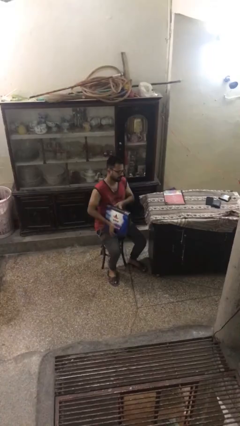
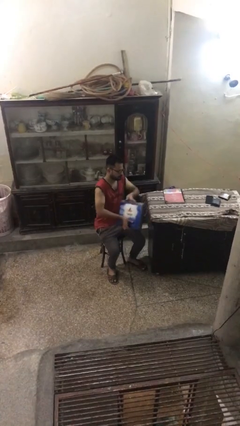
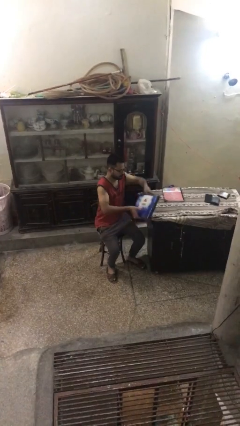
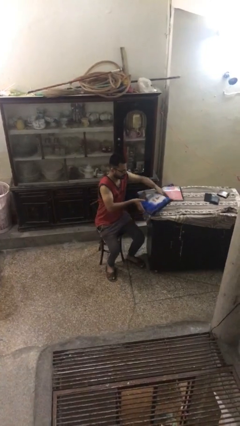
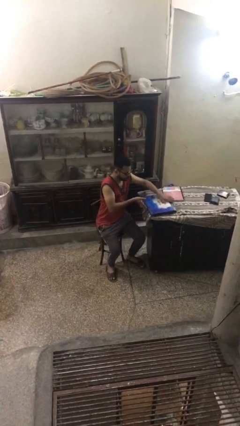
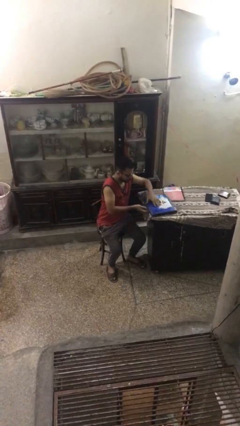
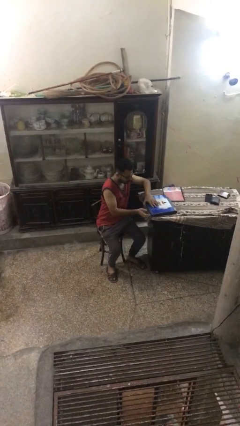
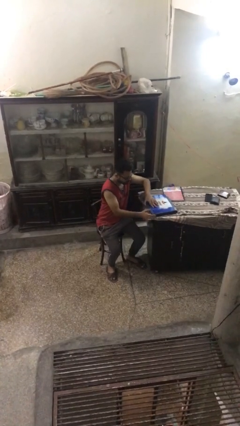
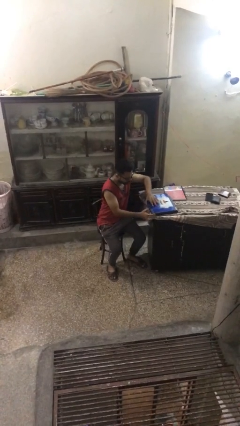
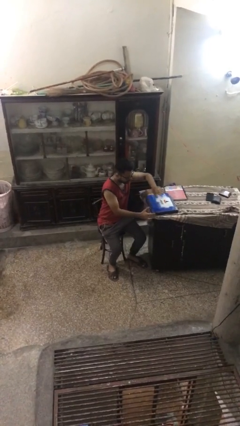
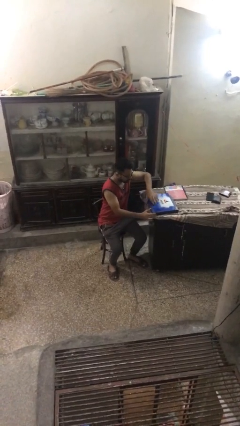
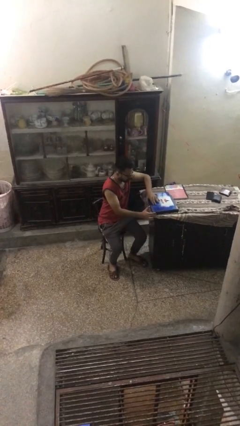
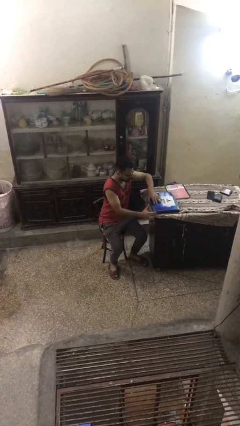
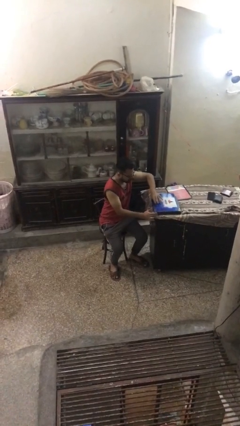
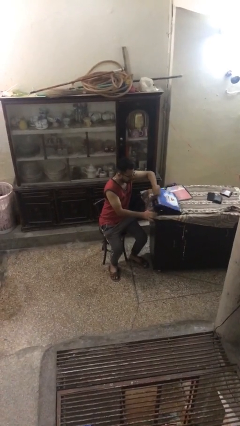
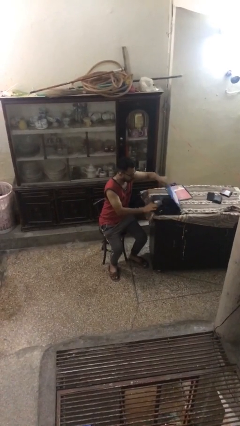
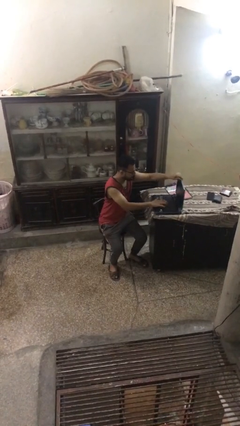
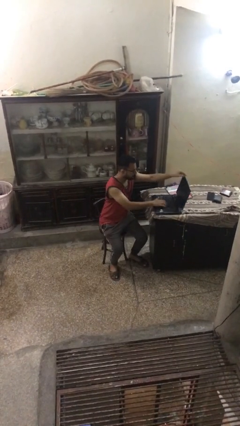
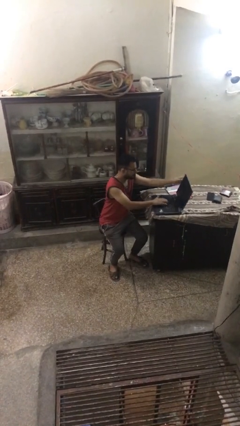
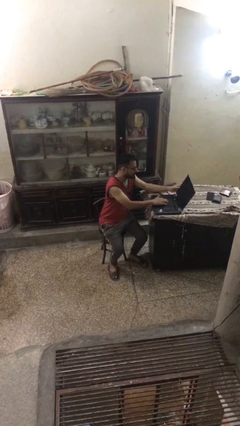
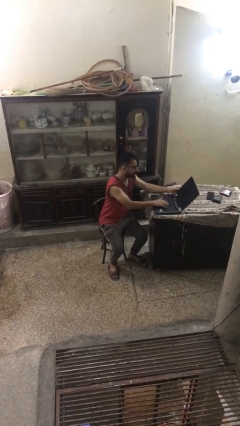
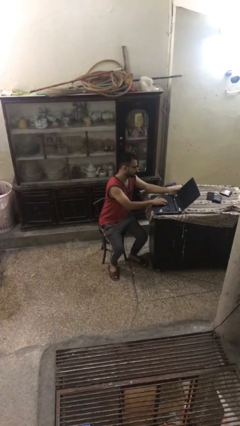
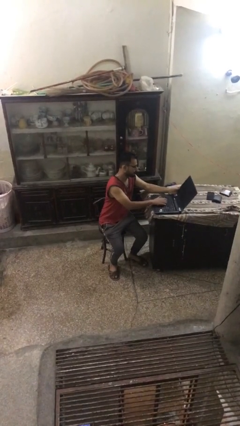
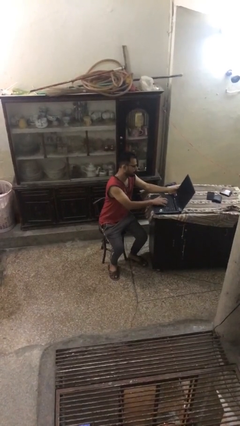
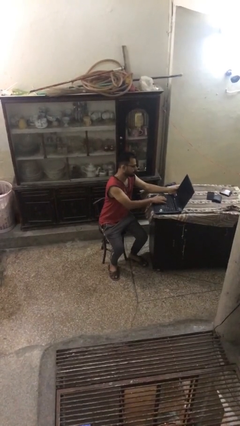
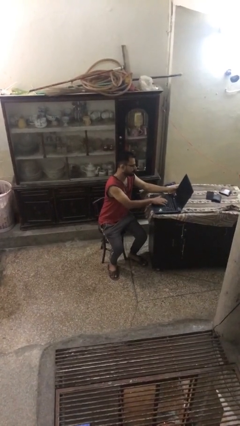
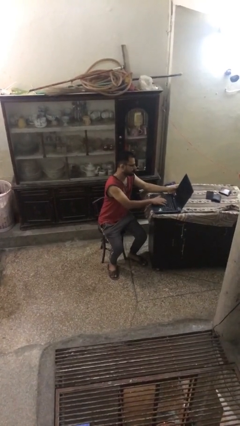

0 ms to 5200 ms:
person interacts with laptop

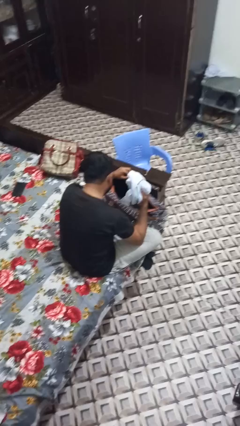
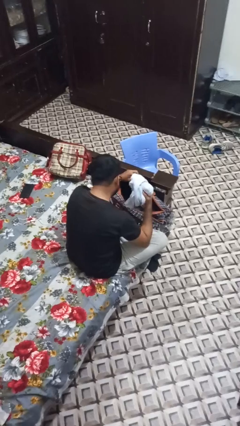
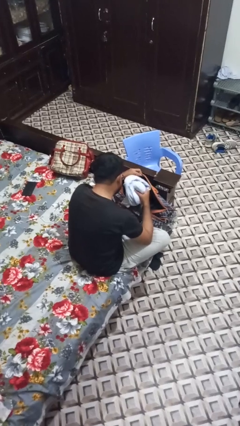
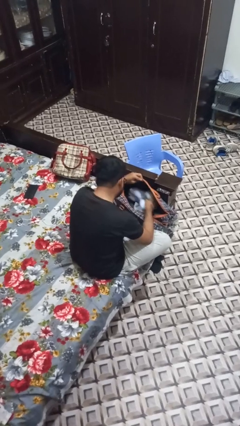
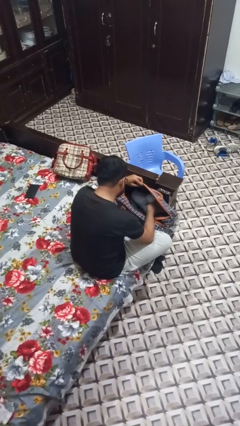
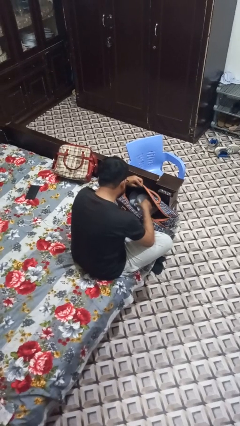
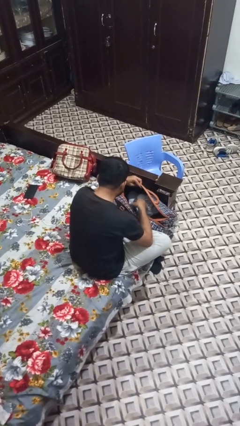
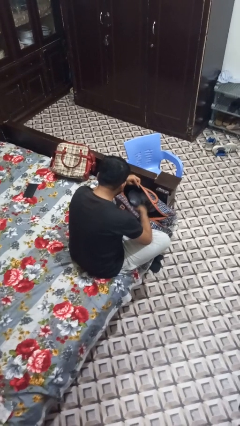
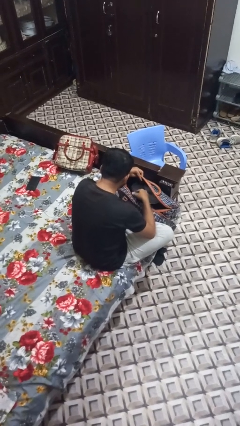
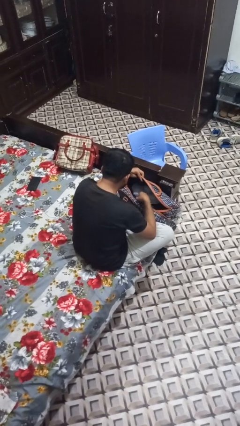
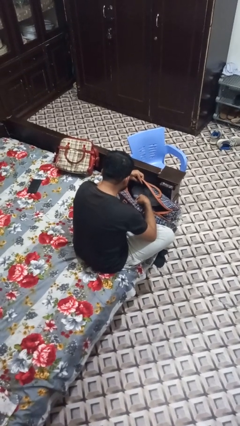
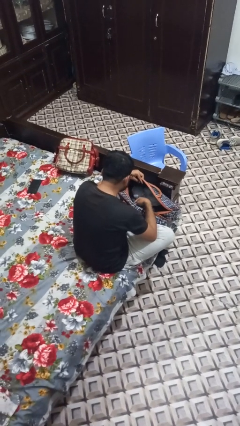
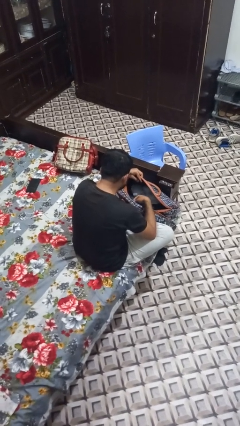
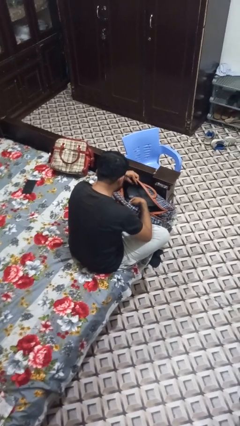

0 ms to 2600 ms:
person puts object into backpack

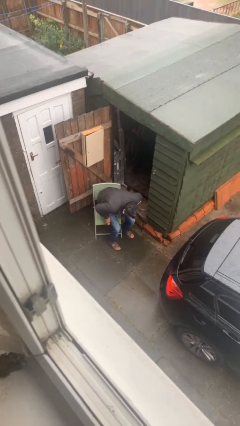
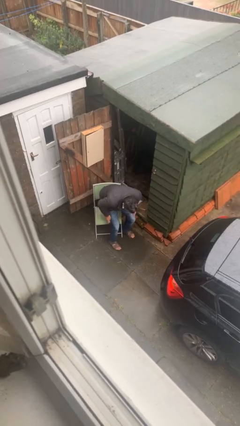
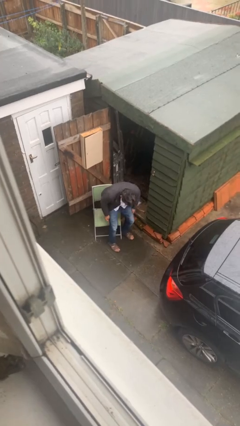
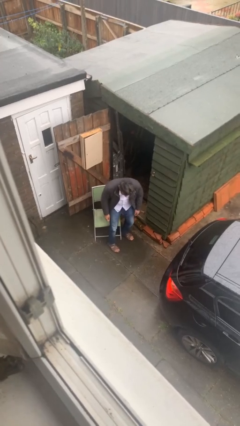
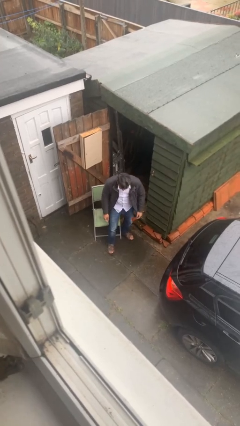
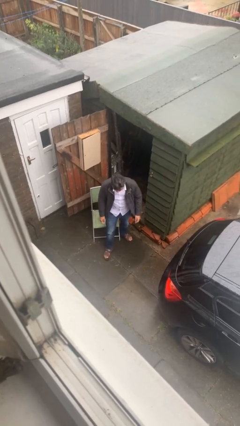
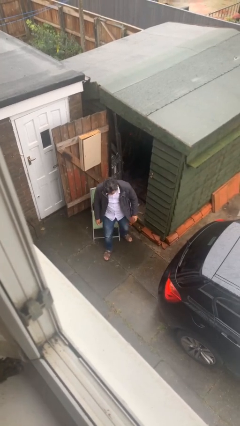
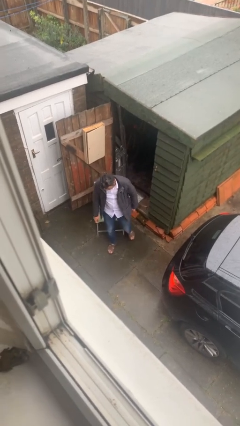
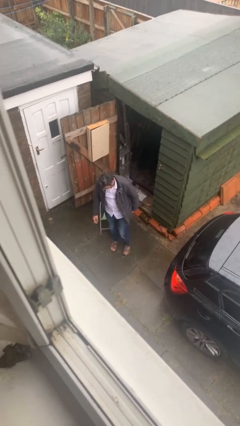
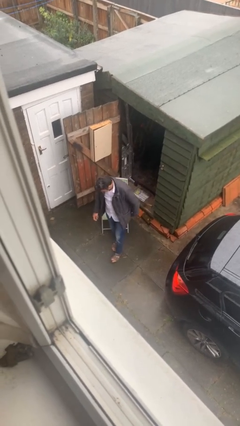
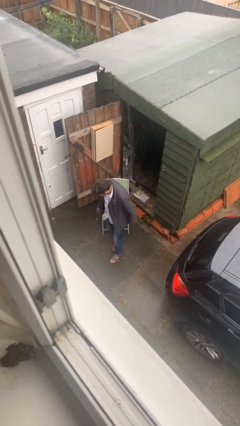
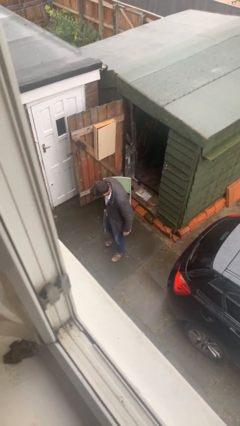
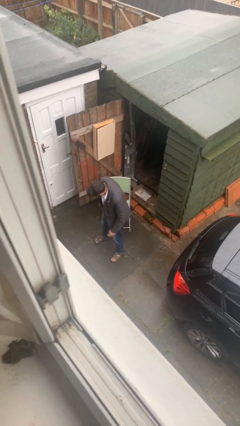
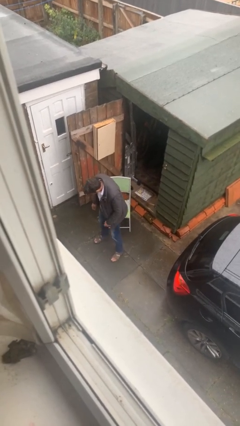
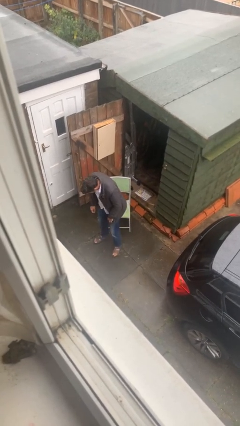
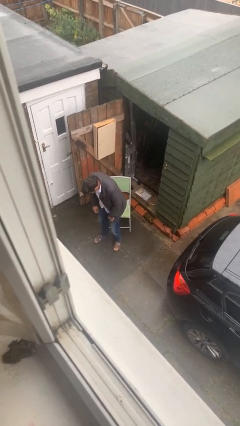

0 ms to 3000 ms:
person stands up

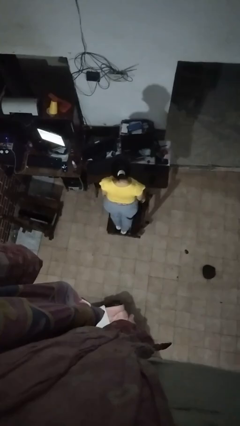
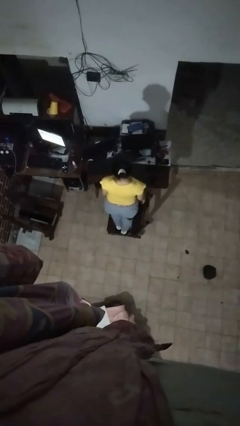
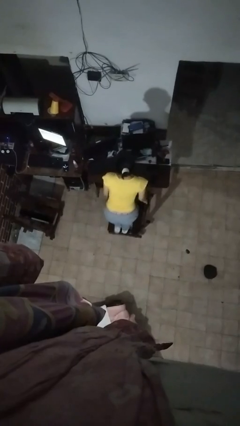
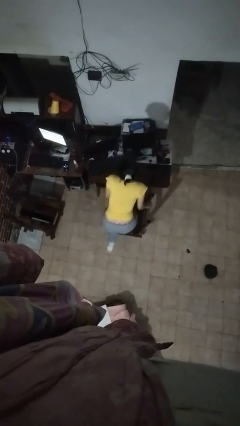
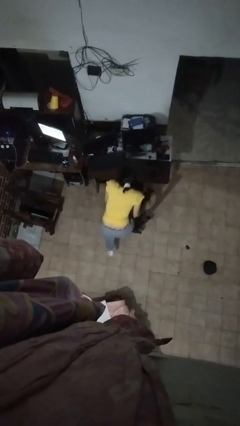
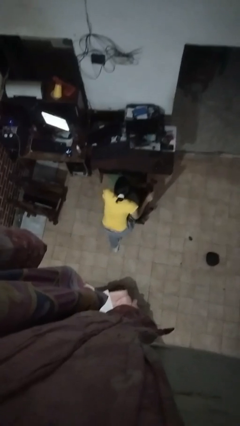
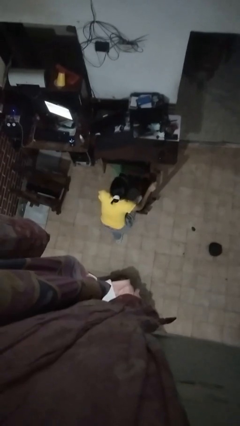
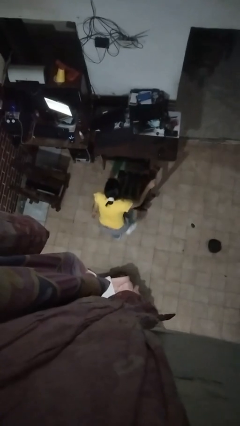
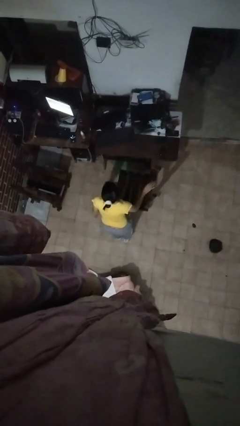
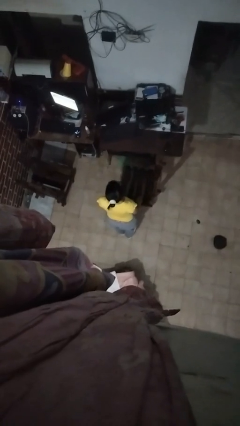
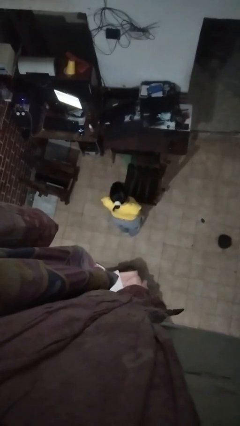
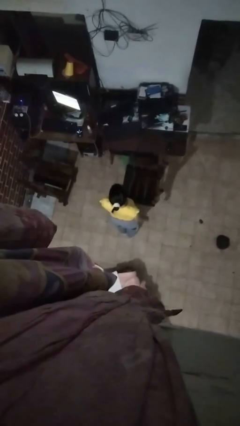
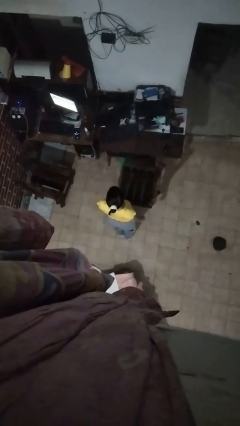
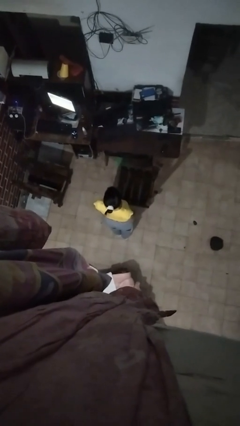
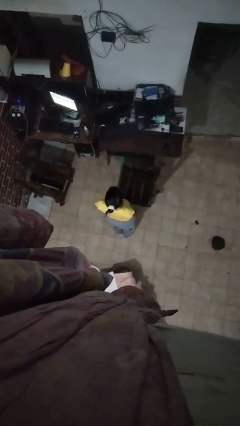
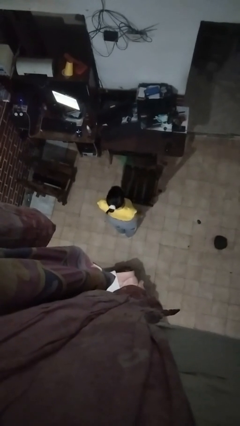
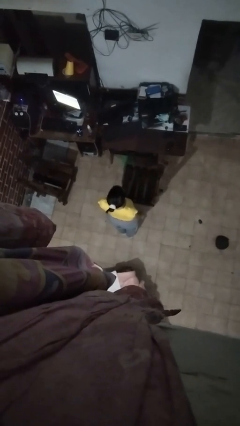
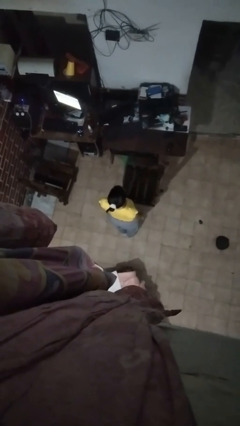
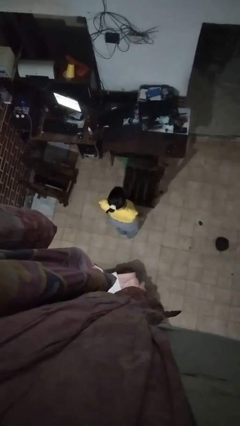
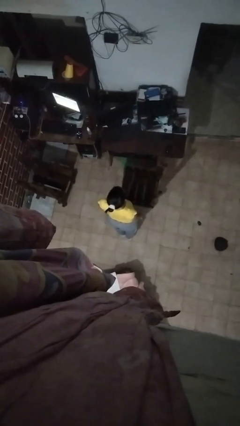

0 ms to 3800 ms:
person climbs off chair

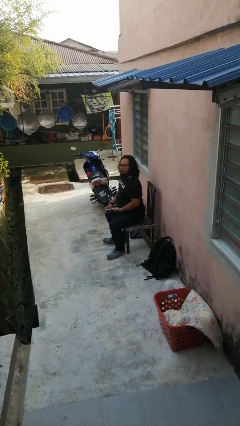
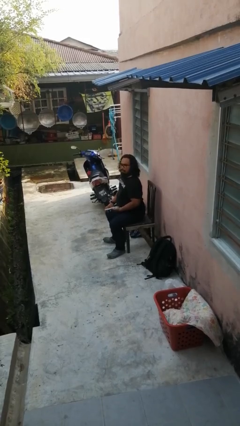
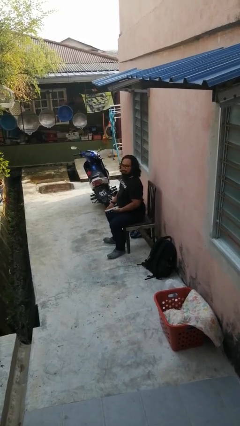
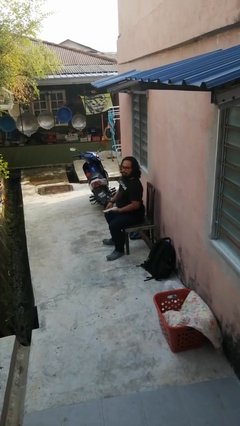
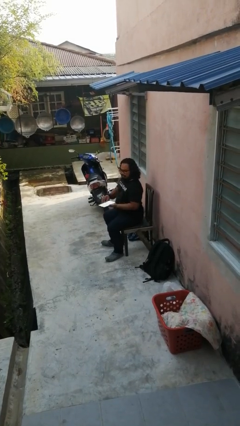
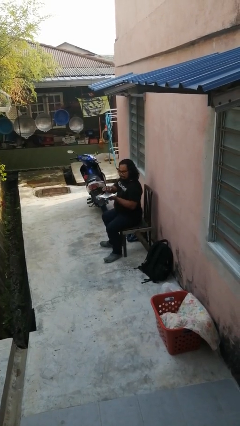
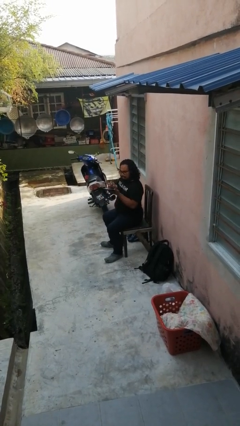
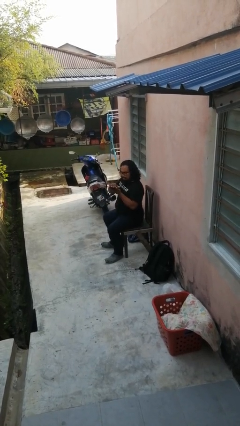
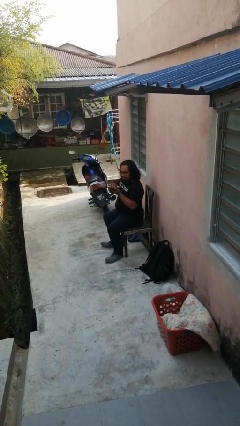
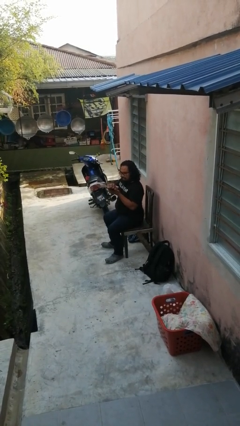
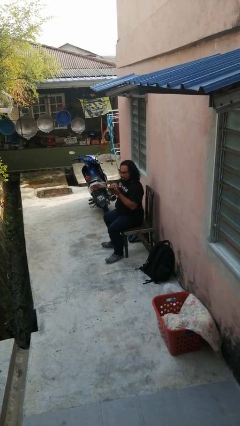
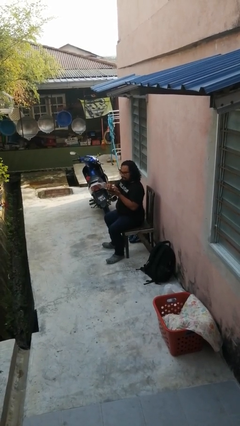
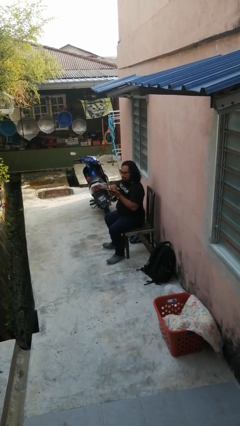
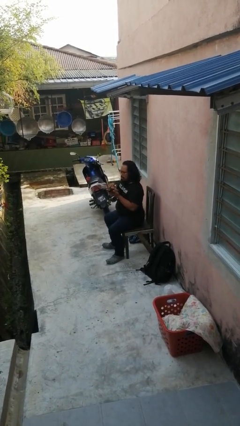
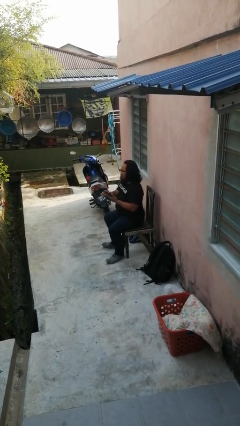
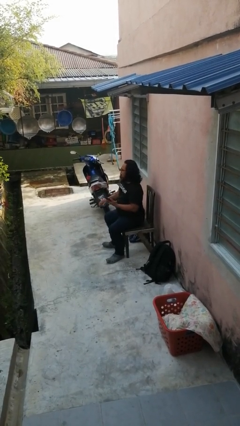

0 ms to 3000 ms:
person interacts with tablet
